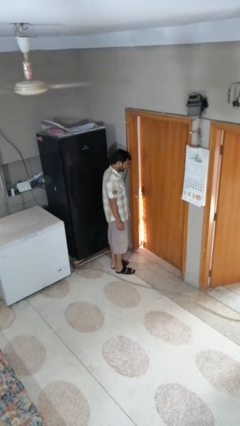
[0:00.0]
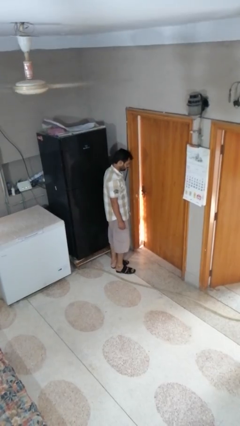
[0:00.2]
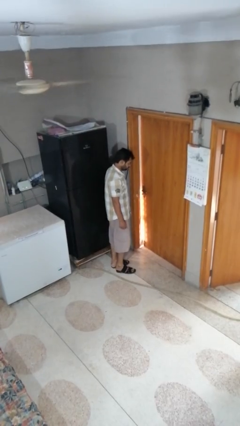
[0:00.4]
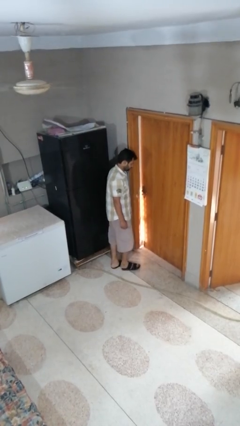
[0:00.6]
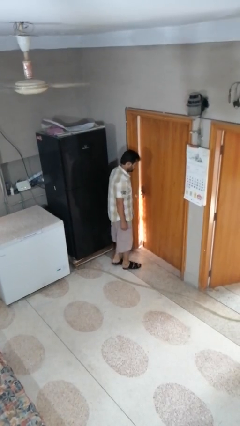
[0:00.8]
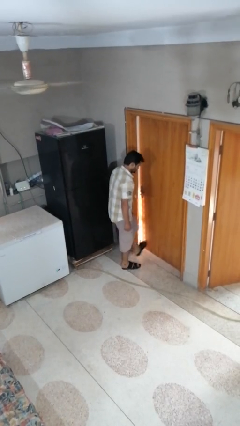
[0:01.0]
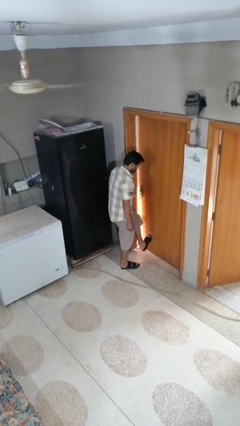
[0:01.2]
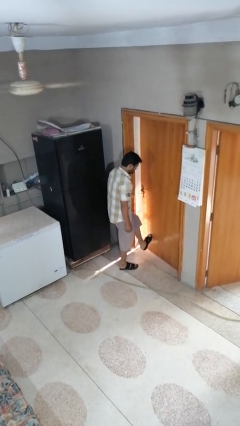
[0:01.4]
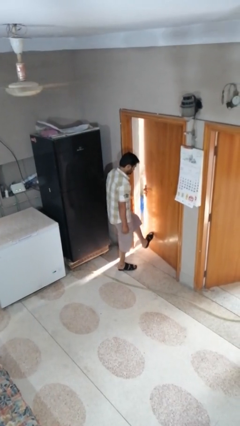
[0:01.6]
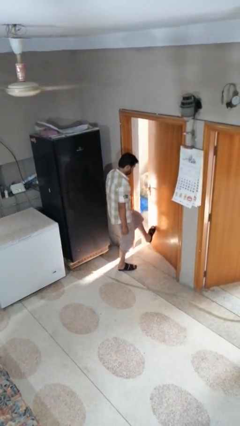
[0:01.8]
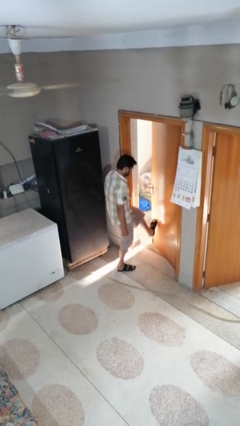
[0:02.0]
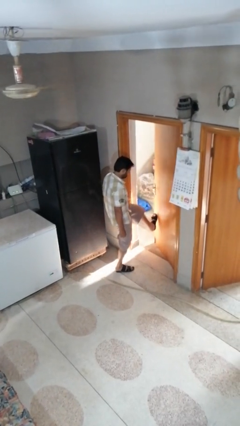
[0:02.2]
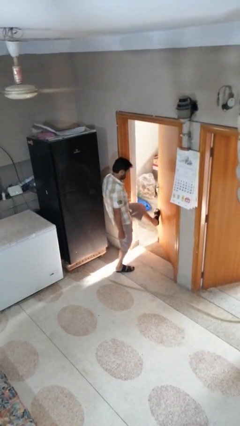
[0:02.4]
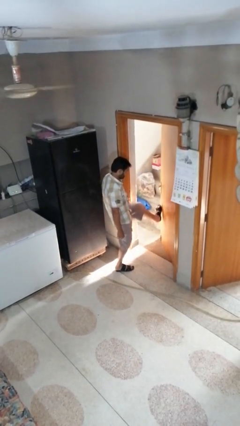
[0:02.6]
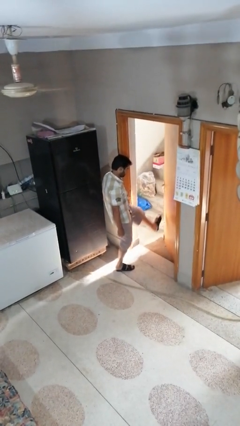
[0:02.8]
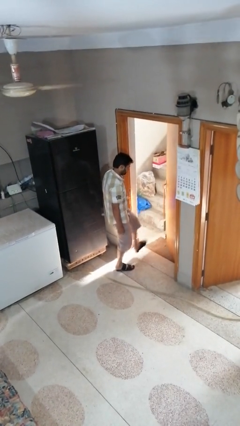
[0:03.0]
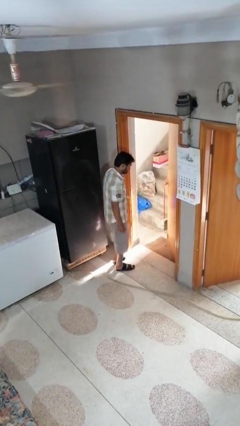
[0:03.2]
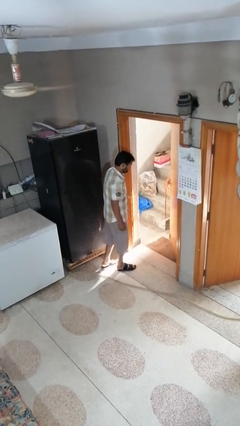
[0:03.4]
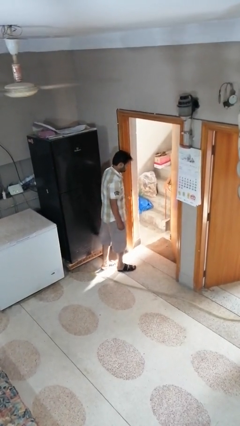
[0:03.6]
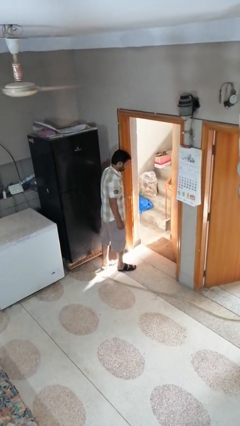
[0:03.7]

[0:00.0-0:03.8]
person opens facility door

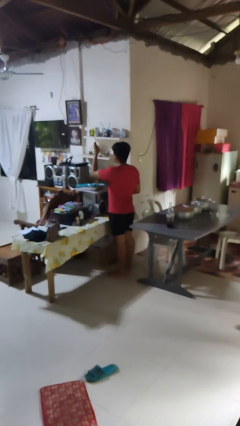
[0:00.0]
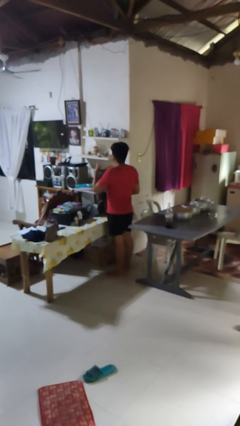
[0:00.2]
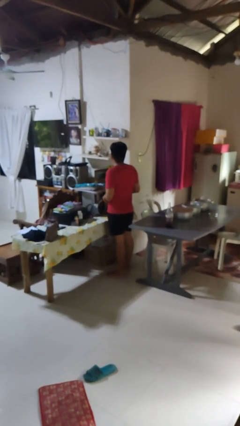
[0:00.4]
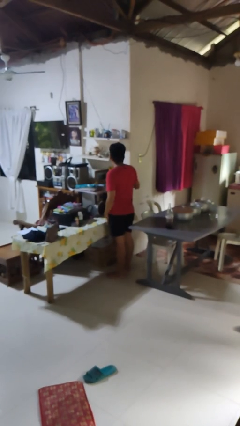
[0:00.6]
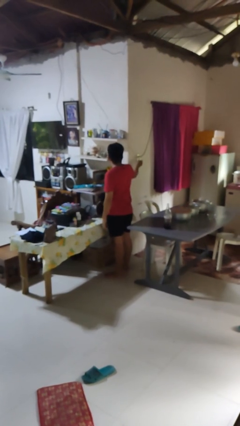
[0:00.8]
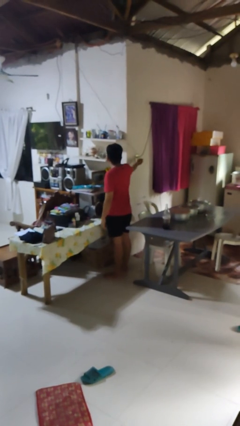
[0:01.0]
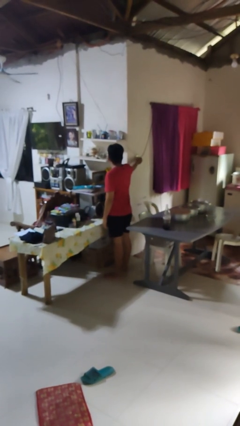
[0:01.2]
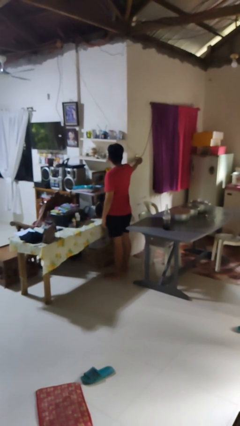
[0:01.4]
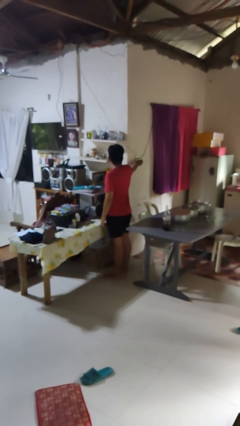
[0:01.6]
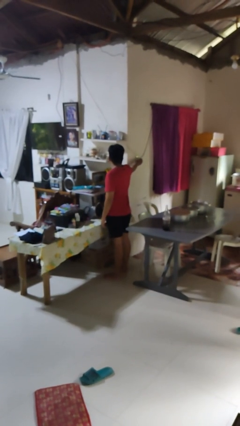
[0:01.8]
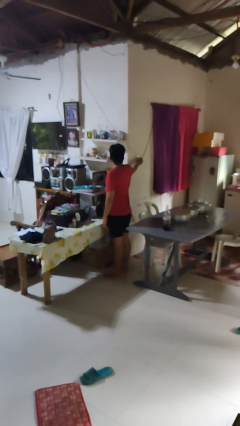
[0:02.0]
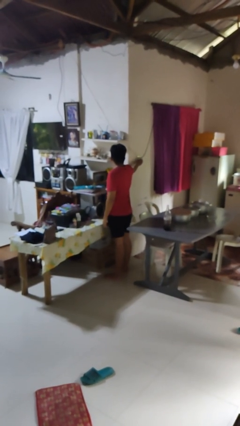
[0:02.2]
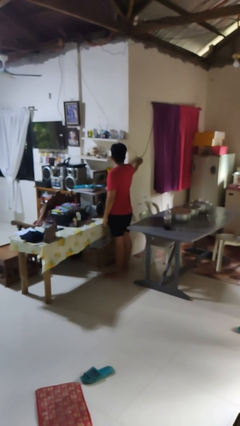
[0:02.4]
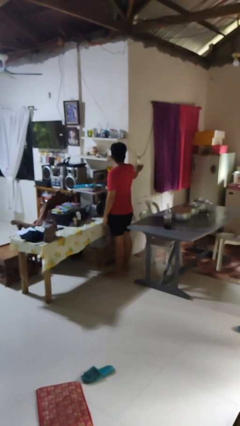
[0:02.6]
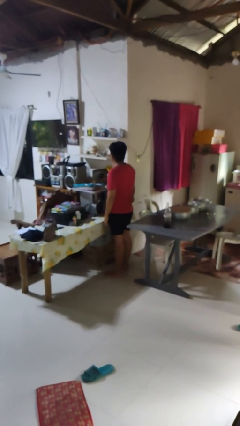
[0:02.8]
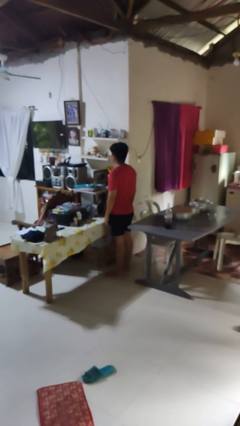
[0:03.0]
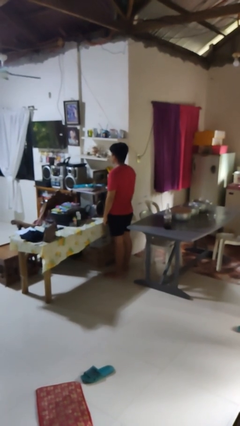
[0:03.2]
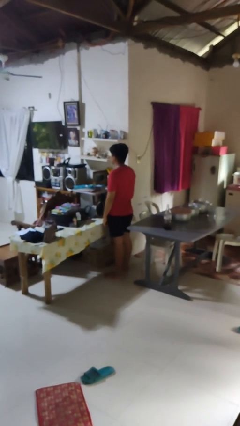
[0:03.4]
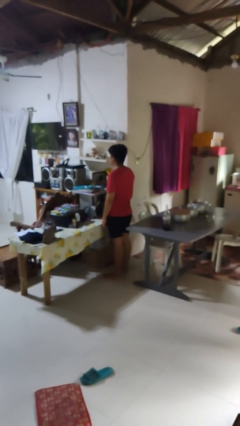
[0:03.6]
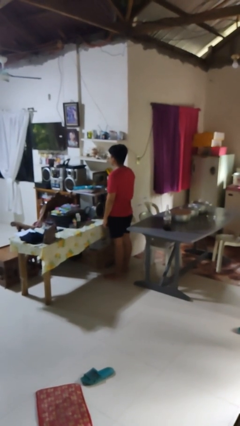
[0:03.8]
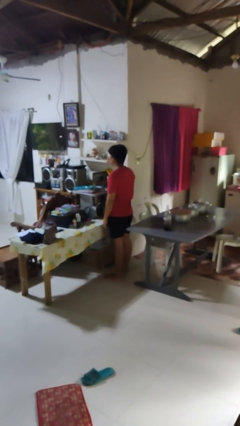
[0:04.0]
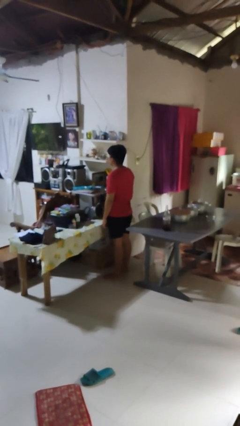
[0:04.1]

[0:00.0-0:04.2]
person turns on fan

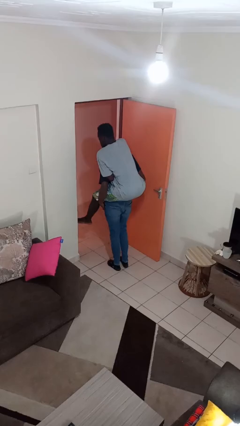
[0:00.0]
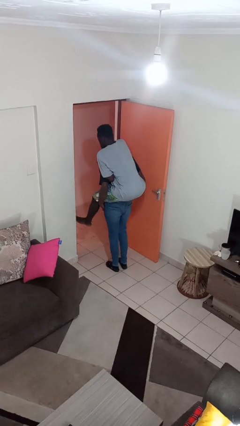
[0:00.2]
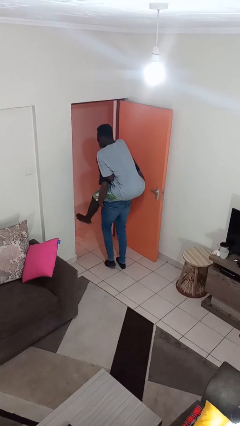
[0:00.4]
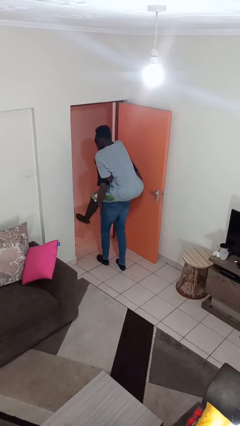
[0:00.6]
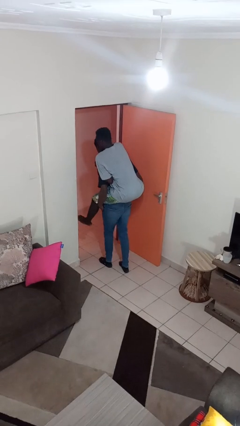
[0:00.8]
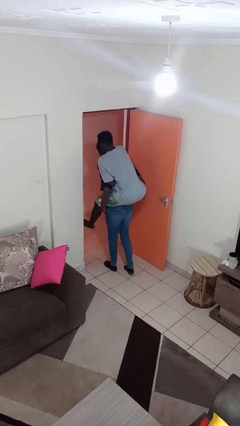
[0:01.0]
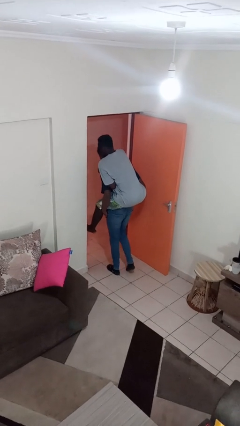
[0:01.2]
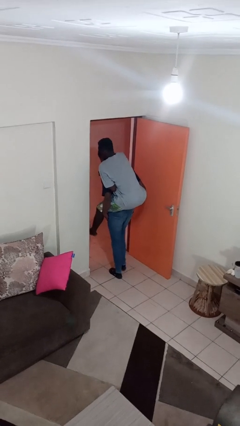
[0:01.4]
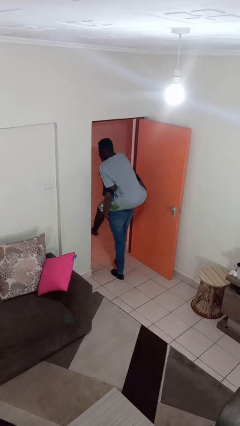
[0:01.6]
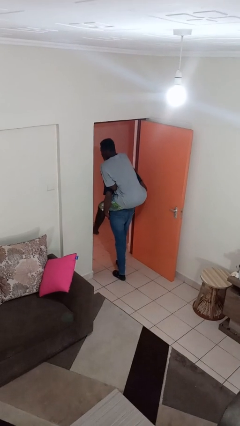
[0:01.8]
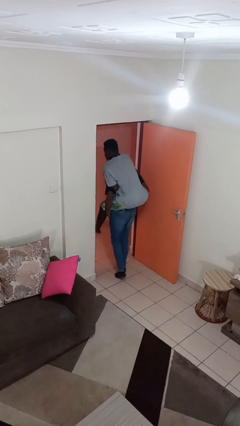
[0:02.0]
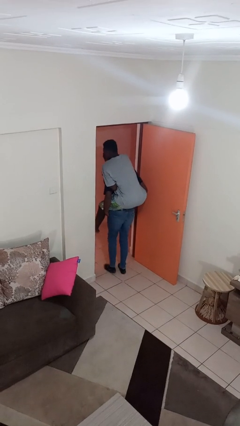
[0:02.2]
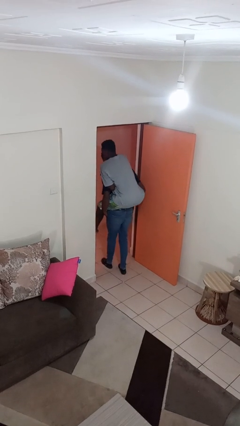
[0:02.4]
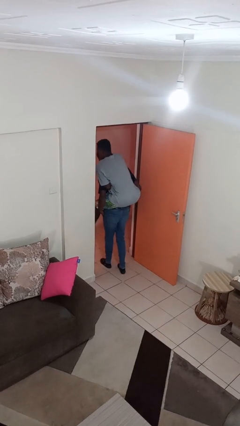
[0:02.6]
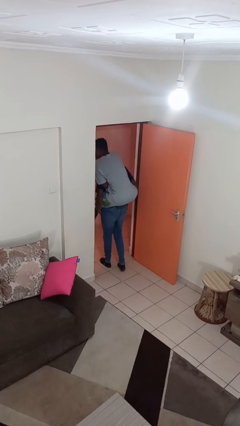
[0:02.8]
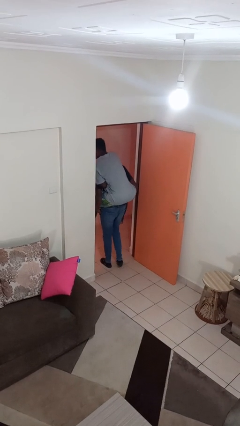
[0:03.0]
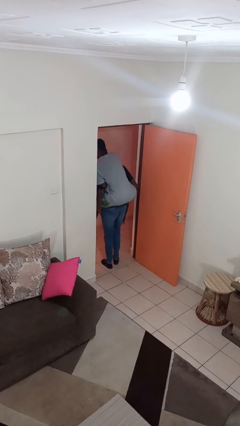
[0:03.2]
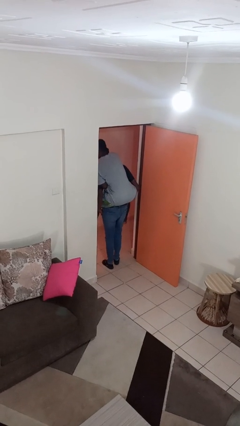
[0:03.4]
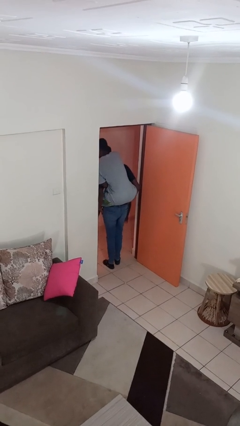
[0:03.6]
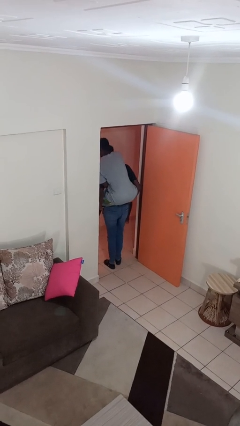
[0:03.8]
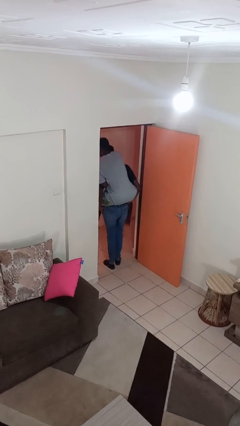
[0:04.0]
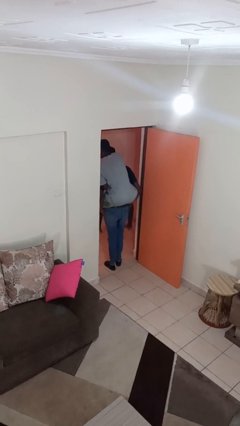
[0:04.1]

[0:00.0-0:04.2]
person carries person on back

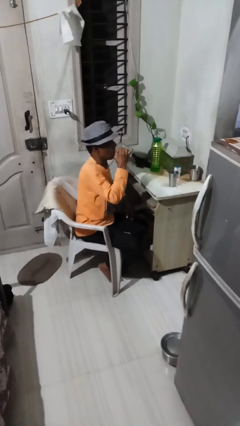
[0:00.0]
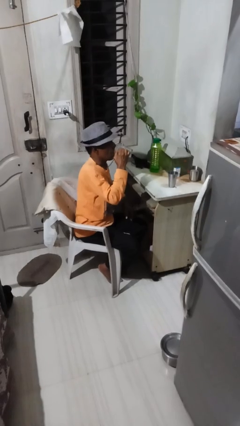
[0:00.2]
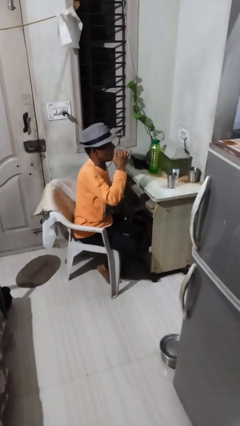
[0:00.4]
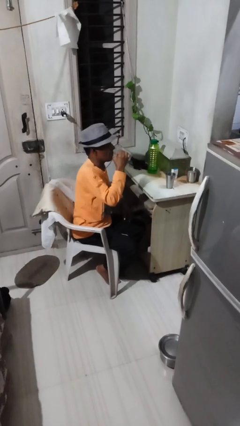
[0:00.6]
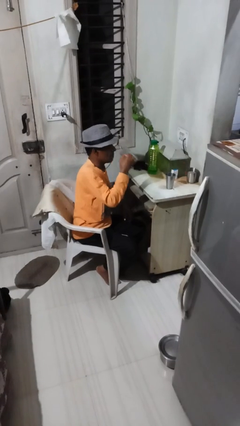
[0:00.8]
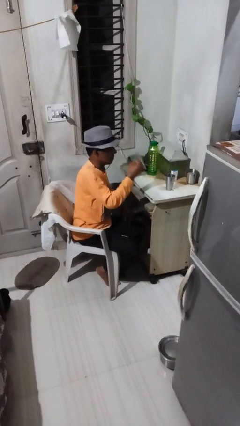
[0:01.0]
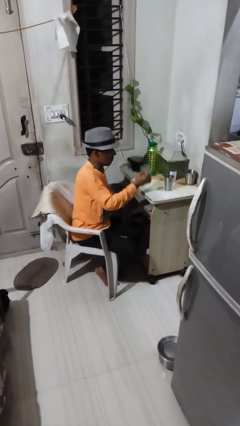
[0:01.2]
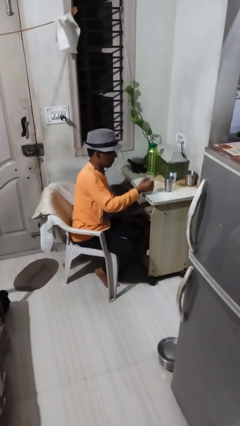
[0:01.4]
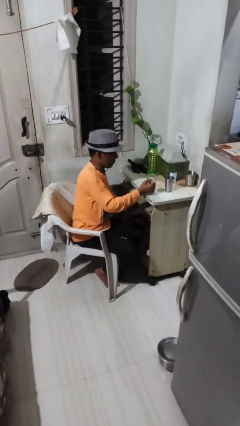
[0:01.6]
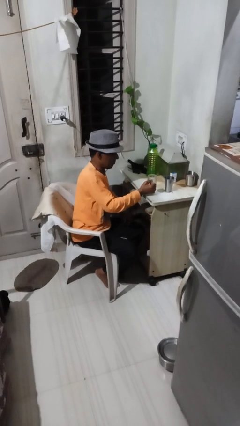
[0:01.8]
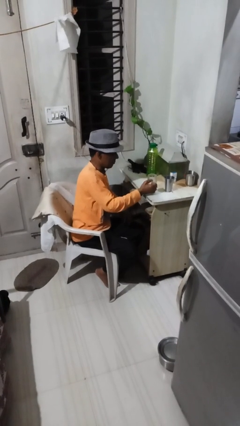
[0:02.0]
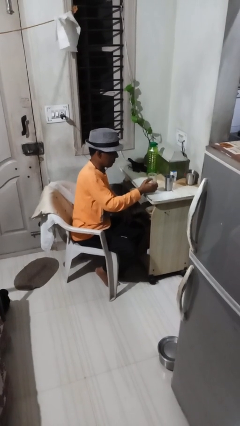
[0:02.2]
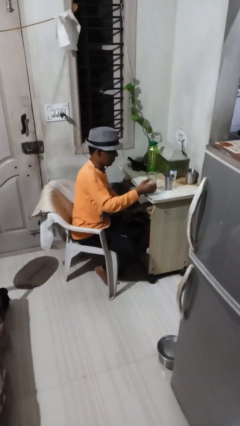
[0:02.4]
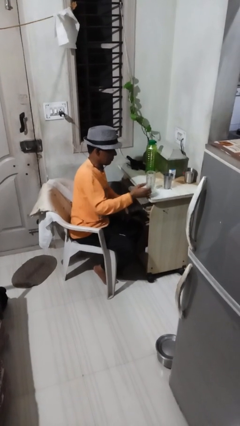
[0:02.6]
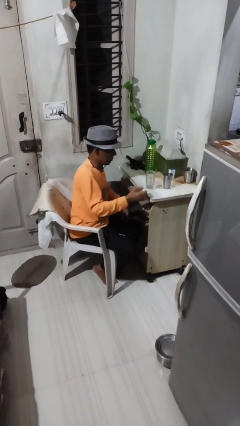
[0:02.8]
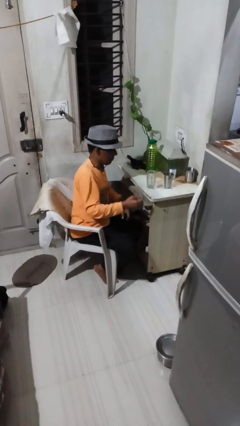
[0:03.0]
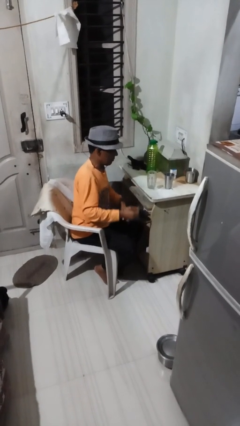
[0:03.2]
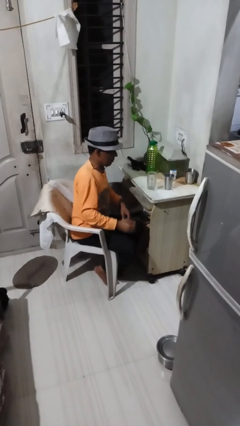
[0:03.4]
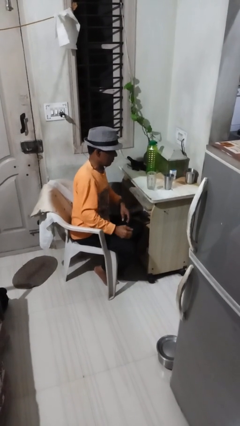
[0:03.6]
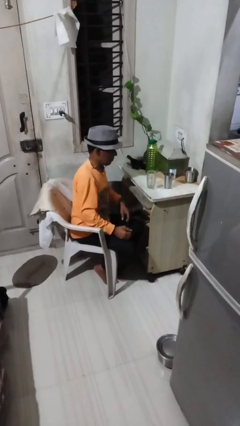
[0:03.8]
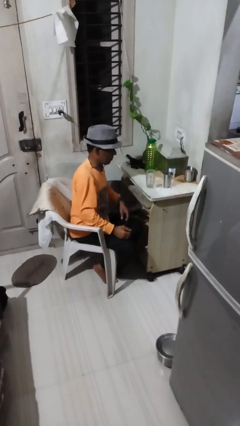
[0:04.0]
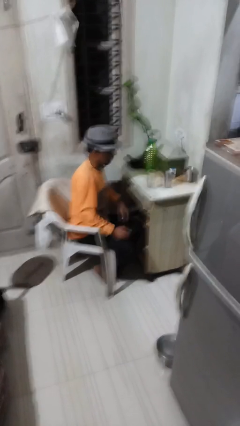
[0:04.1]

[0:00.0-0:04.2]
person puts down object on table

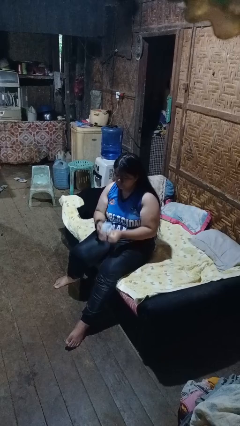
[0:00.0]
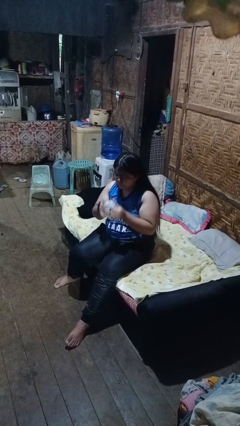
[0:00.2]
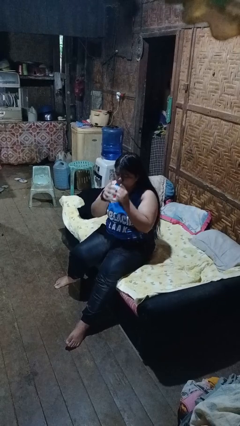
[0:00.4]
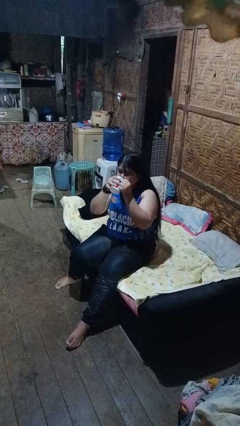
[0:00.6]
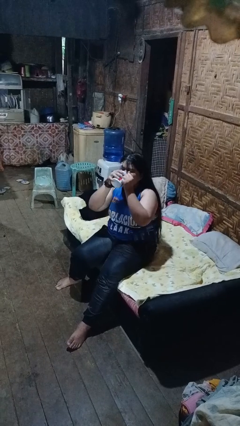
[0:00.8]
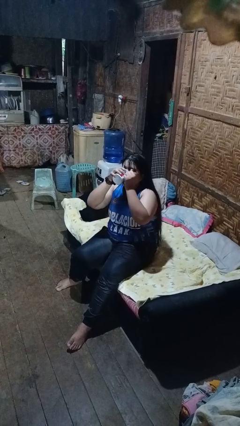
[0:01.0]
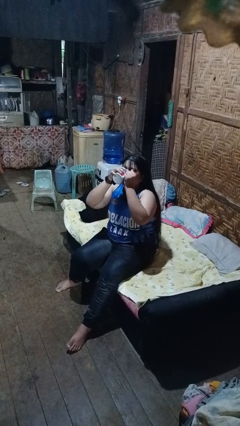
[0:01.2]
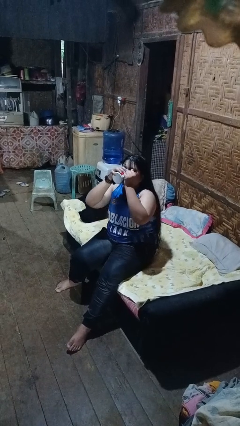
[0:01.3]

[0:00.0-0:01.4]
person drinks from mug
